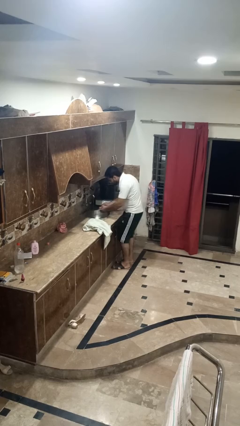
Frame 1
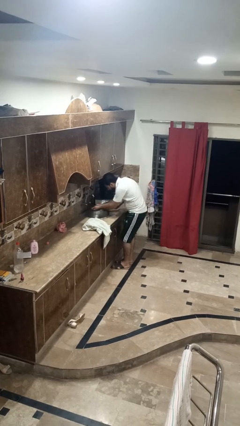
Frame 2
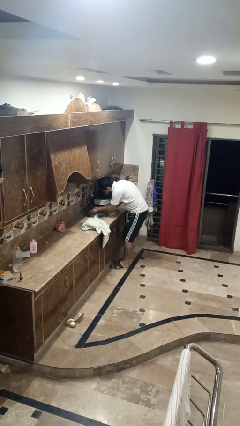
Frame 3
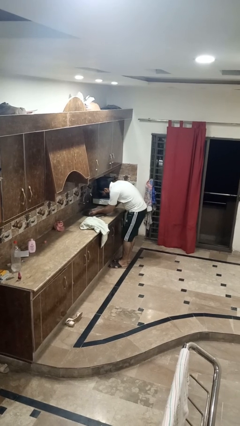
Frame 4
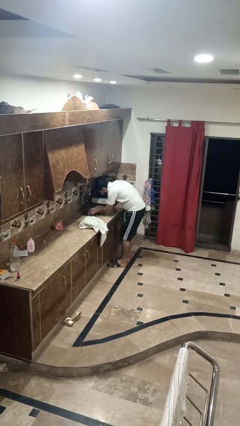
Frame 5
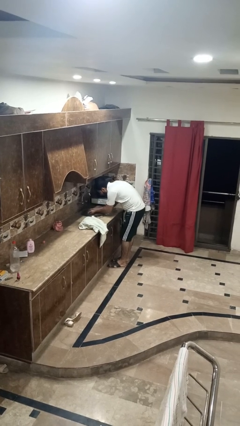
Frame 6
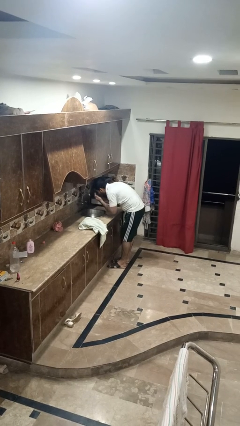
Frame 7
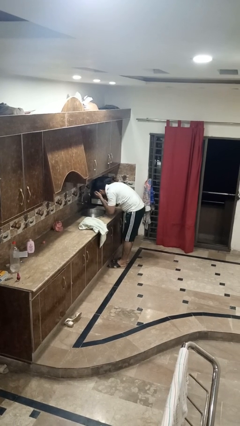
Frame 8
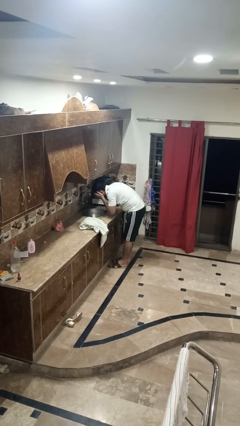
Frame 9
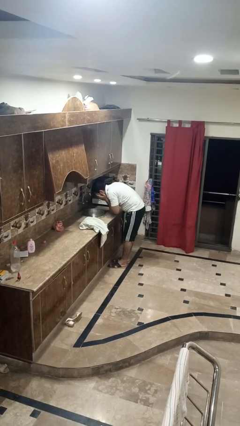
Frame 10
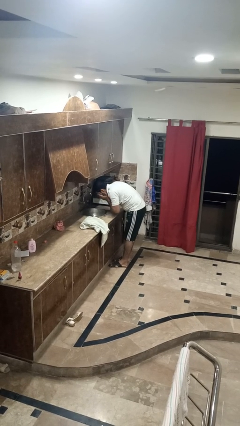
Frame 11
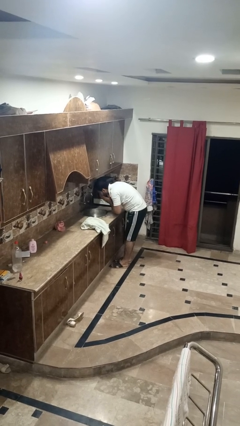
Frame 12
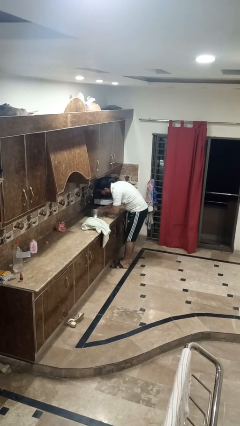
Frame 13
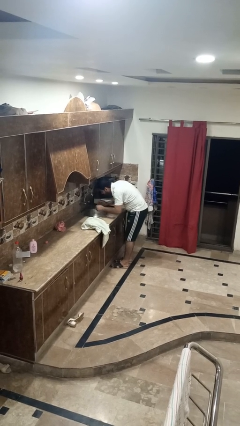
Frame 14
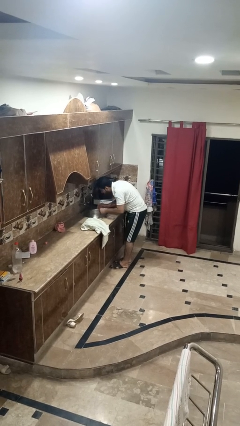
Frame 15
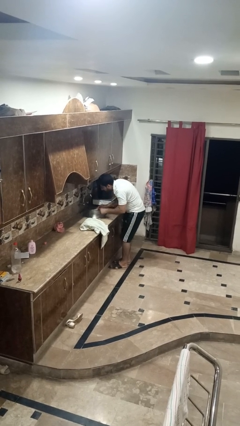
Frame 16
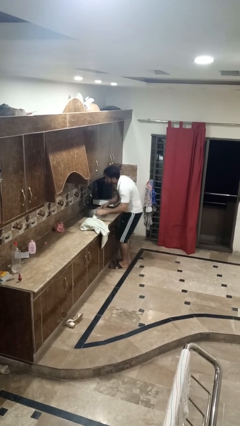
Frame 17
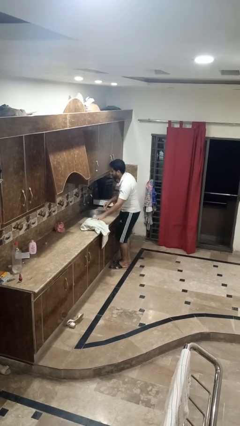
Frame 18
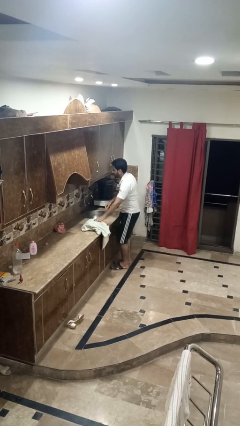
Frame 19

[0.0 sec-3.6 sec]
person washes face

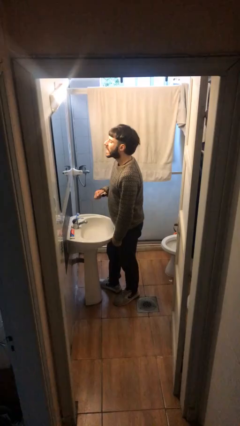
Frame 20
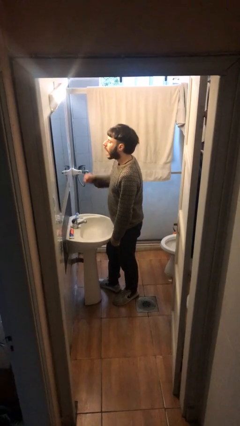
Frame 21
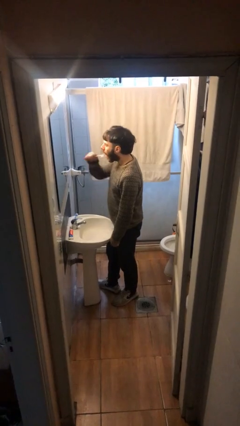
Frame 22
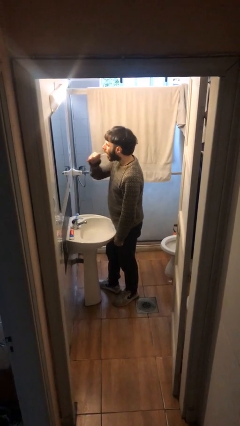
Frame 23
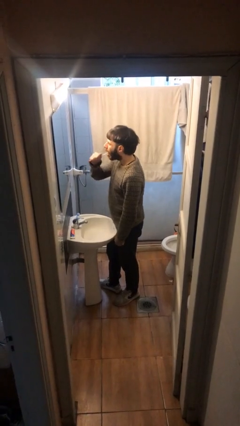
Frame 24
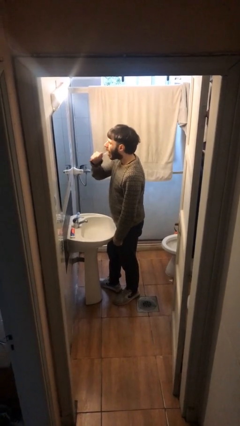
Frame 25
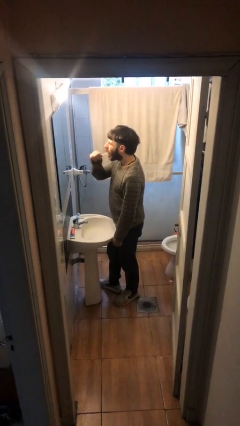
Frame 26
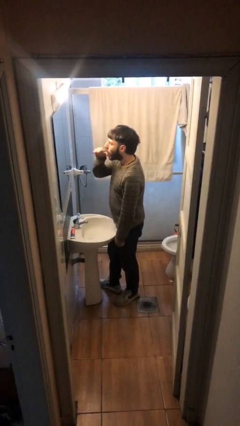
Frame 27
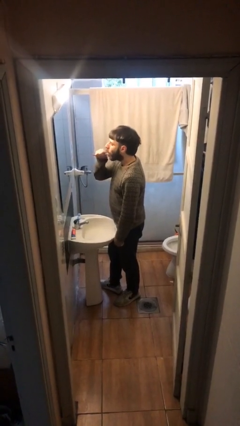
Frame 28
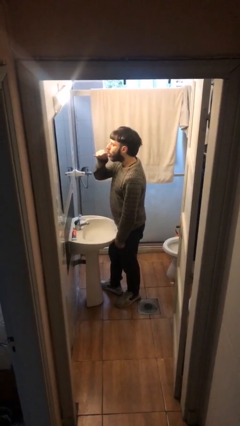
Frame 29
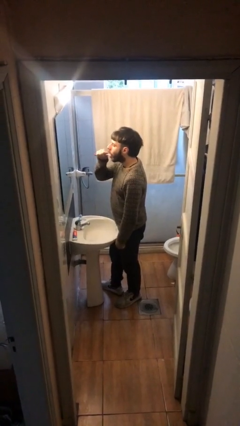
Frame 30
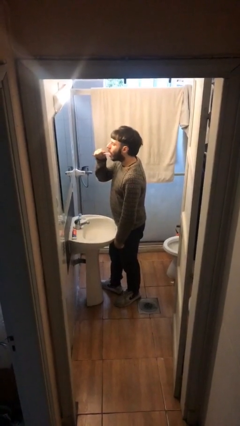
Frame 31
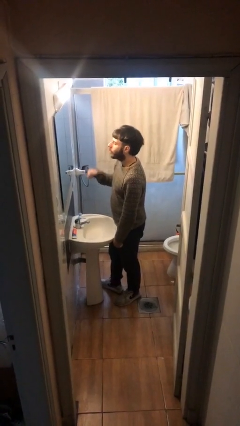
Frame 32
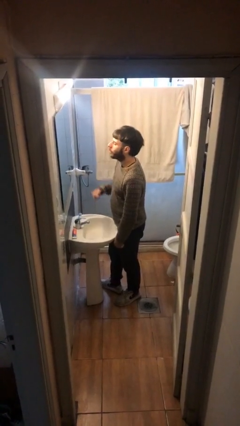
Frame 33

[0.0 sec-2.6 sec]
person brushes teeth

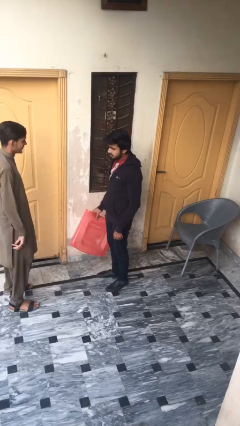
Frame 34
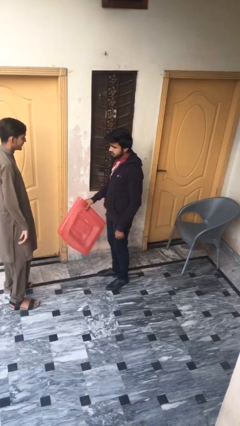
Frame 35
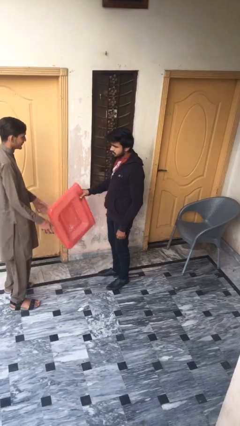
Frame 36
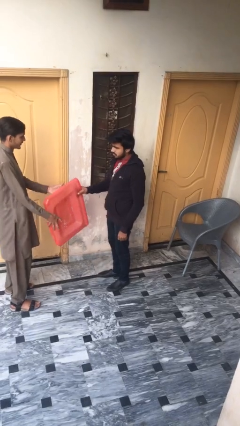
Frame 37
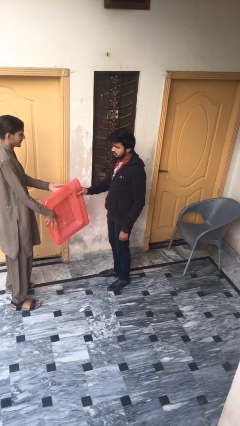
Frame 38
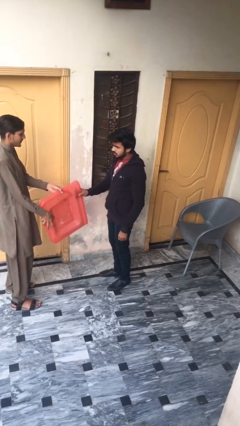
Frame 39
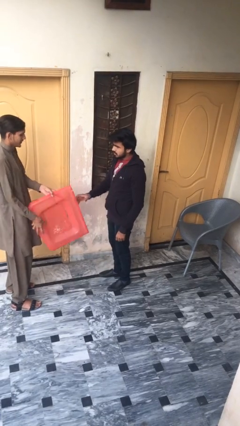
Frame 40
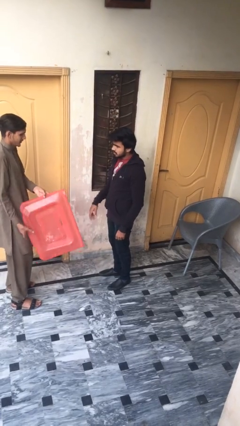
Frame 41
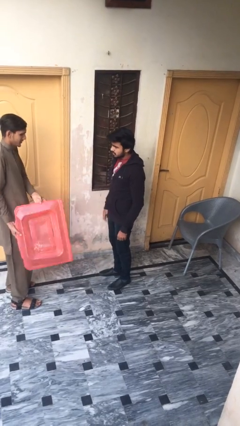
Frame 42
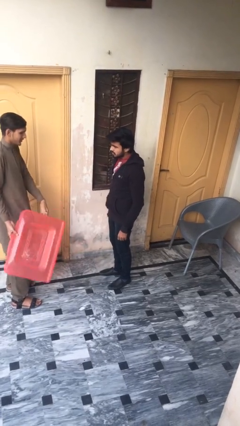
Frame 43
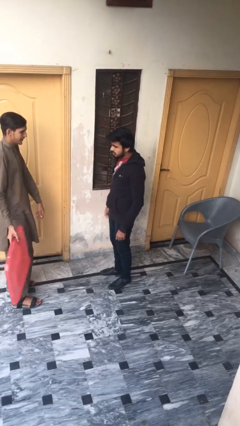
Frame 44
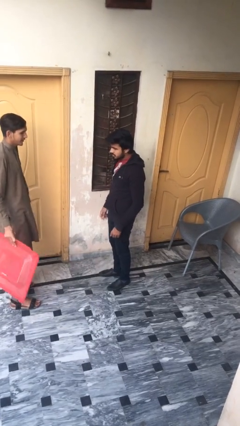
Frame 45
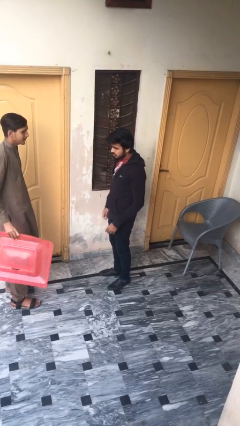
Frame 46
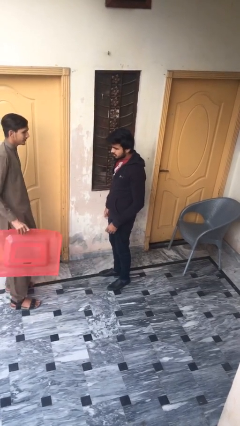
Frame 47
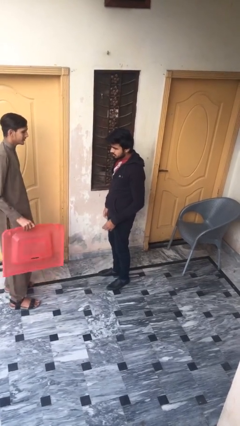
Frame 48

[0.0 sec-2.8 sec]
person transfers object to person

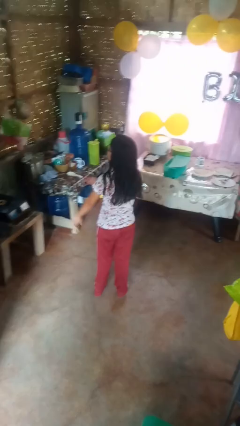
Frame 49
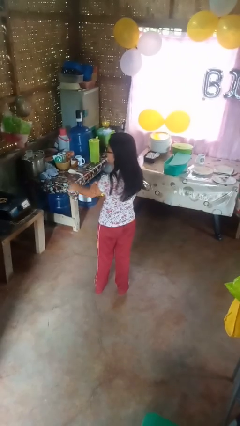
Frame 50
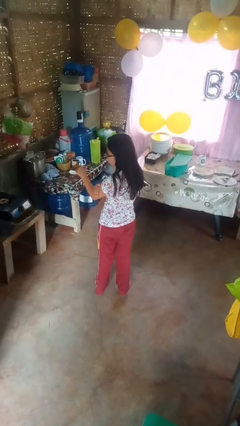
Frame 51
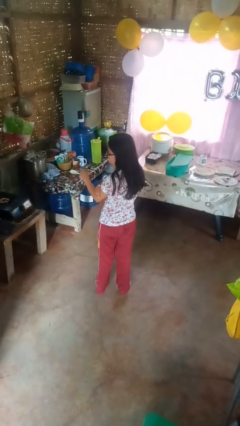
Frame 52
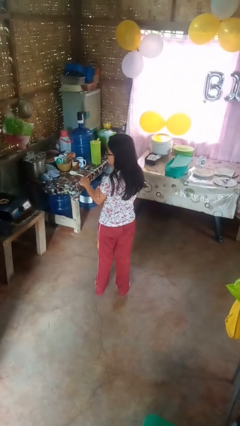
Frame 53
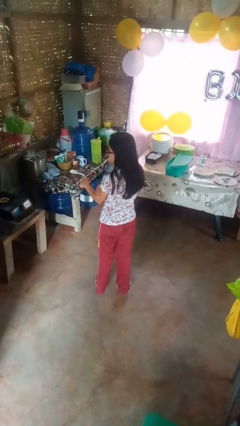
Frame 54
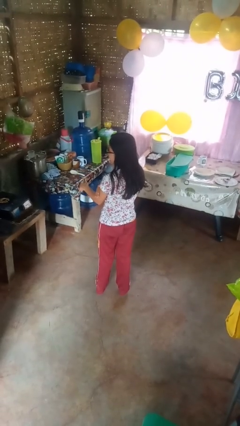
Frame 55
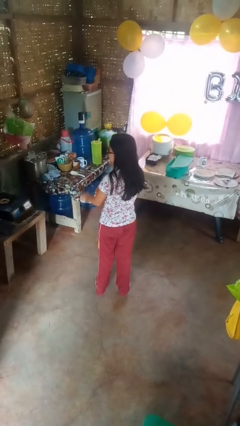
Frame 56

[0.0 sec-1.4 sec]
person swats bug

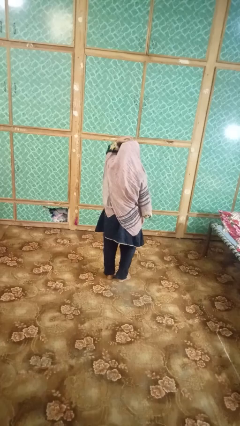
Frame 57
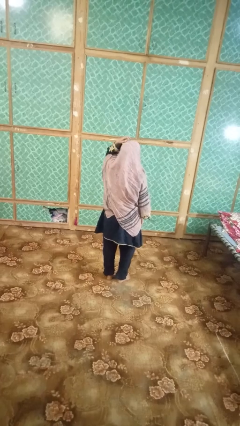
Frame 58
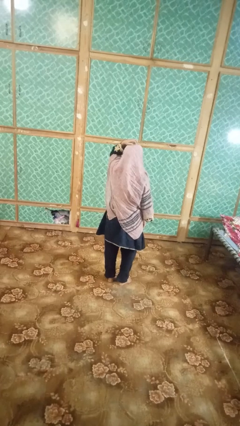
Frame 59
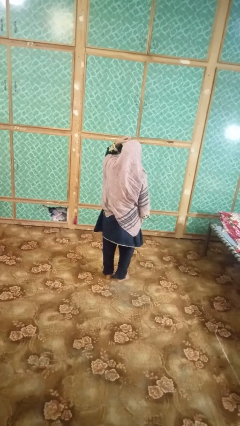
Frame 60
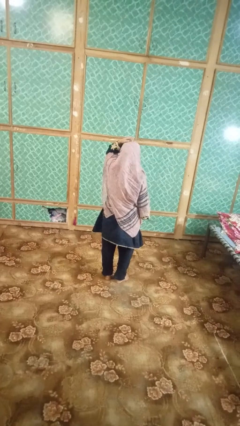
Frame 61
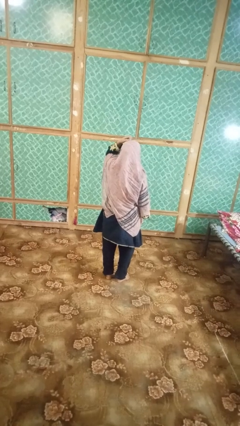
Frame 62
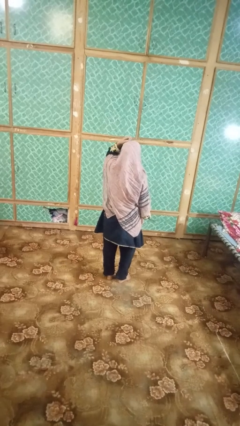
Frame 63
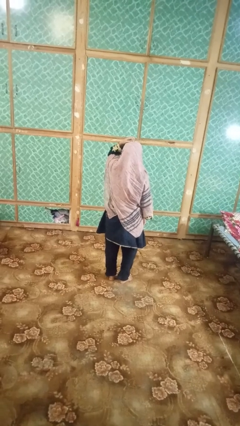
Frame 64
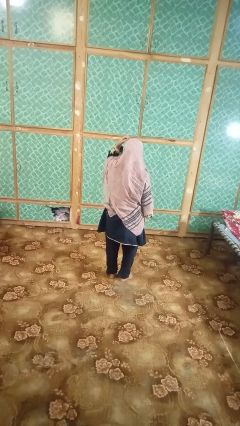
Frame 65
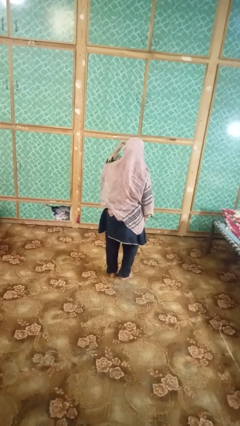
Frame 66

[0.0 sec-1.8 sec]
person strokes hair

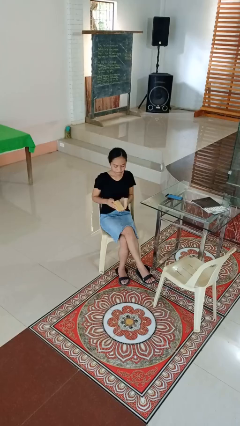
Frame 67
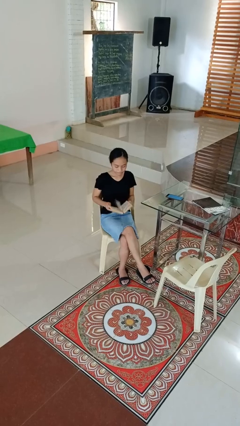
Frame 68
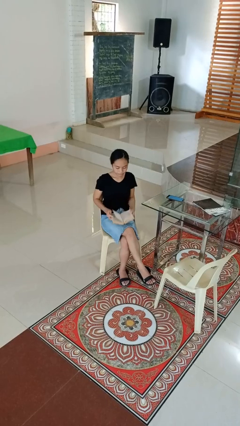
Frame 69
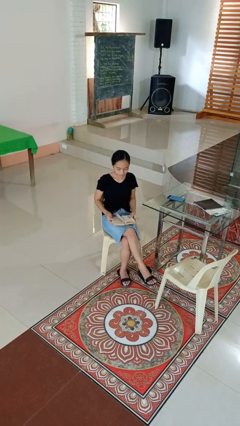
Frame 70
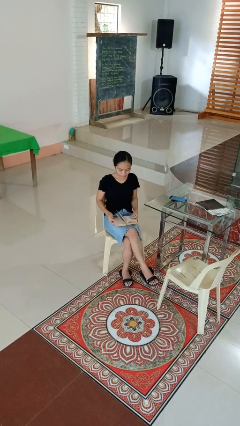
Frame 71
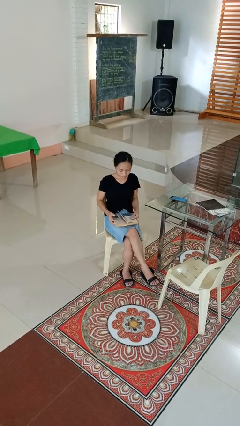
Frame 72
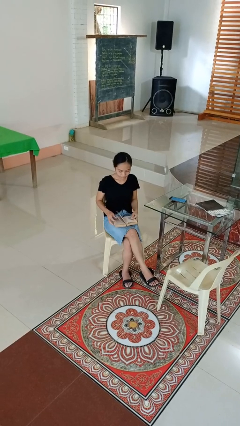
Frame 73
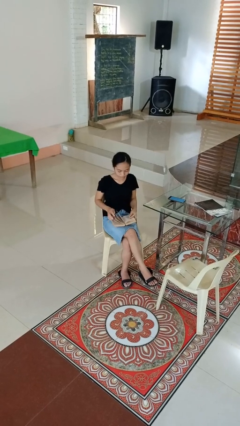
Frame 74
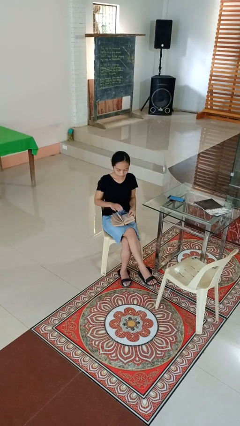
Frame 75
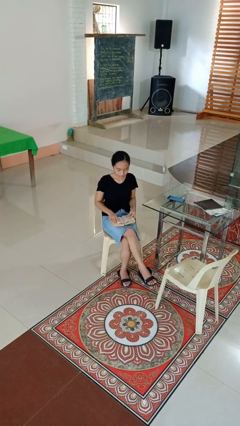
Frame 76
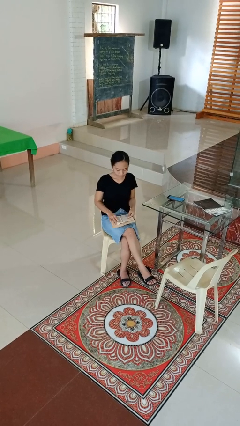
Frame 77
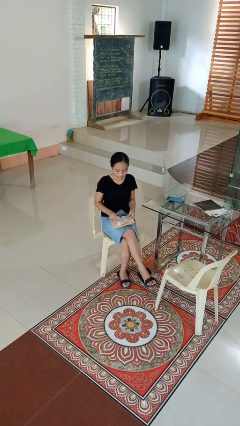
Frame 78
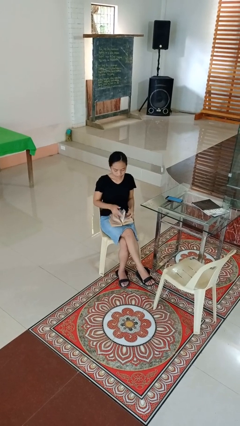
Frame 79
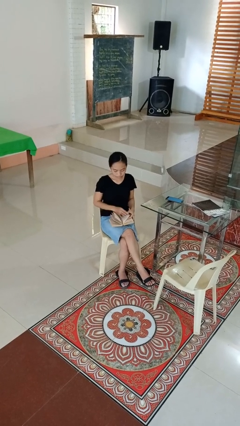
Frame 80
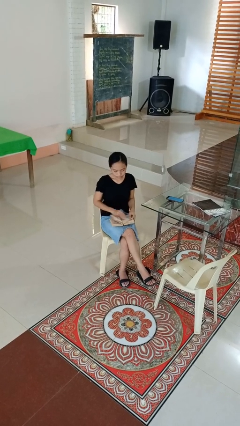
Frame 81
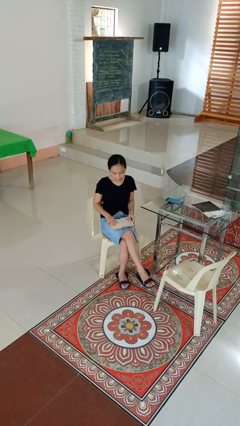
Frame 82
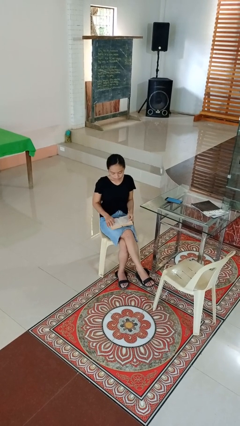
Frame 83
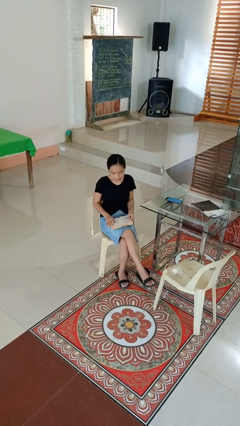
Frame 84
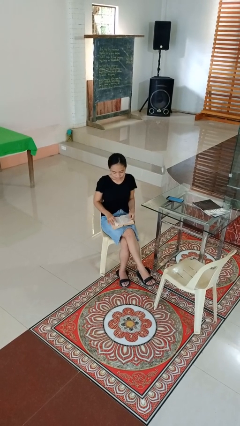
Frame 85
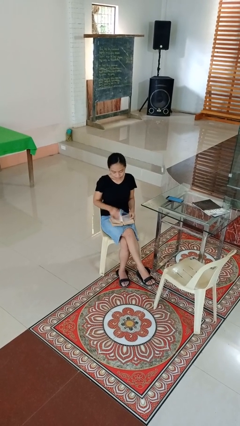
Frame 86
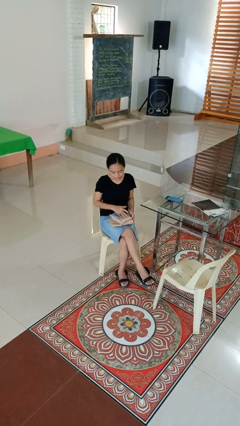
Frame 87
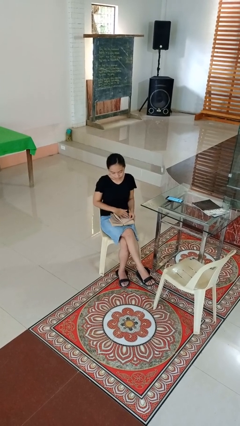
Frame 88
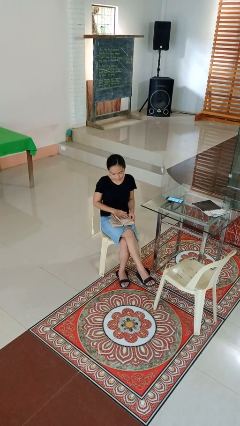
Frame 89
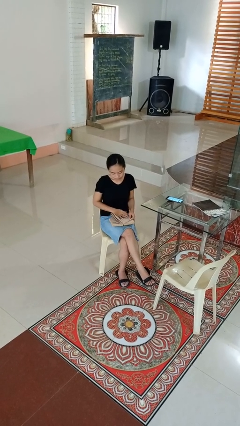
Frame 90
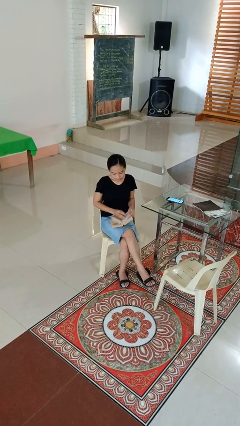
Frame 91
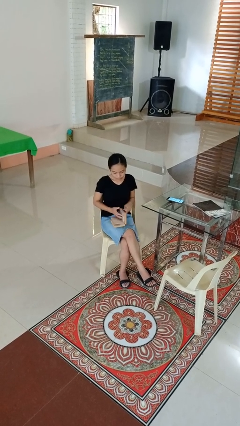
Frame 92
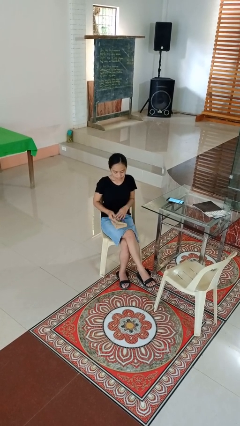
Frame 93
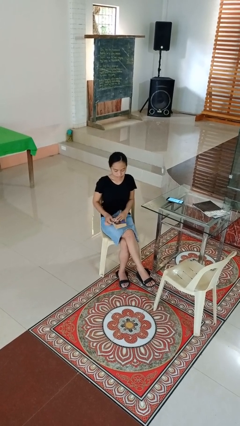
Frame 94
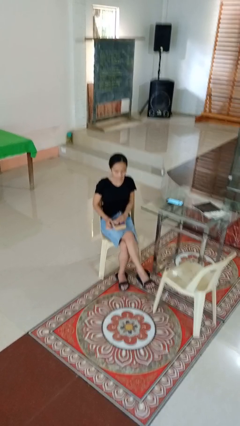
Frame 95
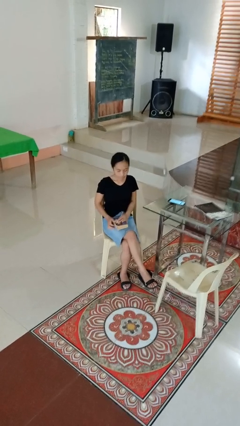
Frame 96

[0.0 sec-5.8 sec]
person reads book
